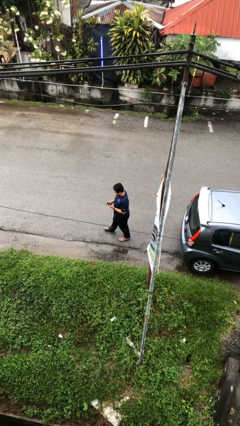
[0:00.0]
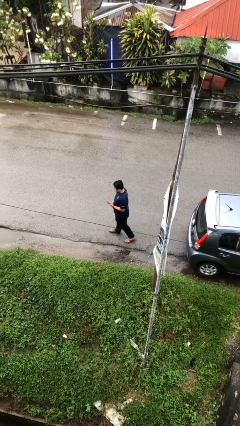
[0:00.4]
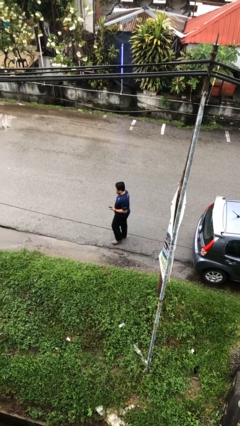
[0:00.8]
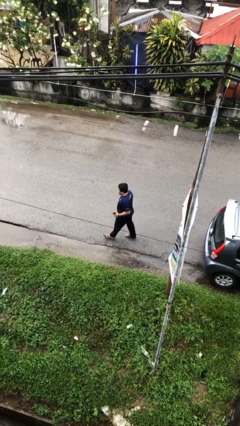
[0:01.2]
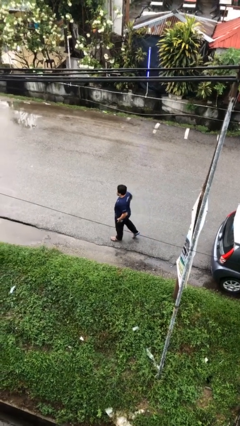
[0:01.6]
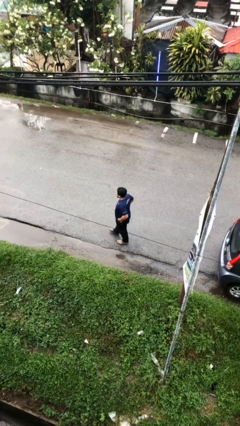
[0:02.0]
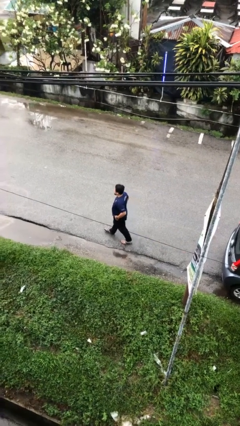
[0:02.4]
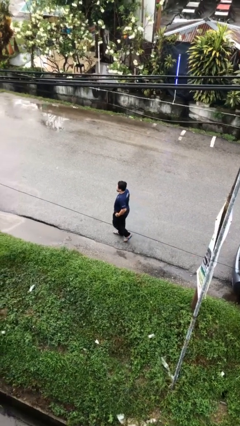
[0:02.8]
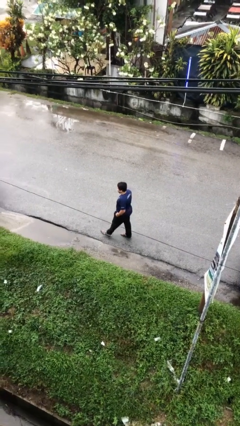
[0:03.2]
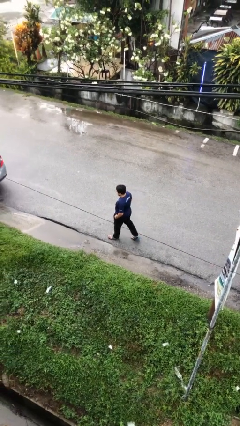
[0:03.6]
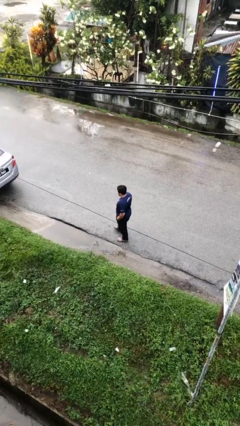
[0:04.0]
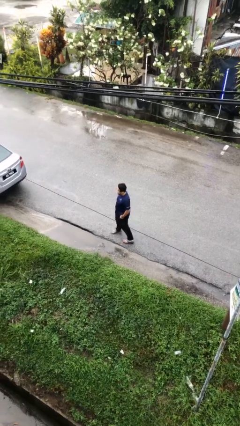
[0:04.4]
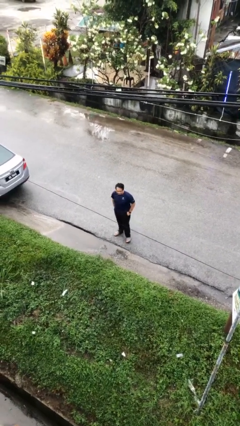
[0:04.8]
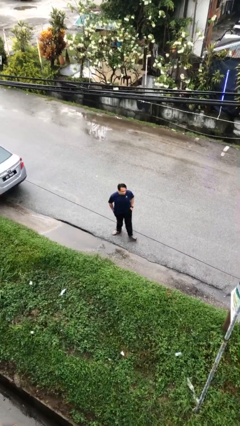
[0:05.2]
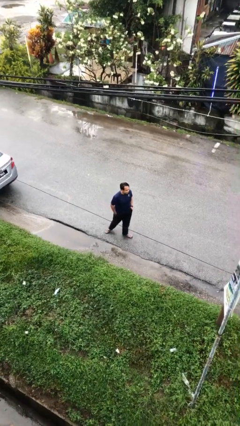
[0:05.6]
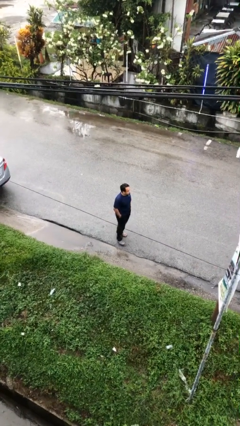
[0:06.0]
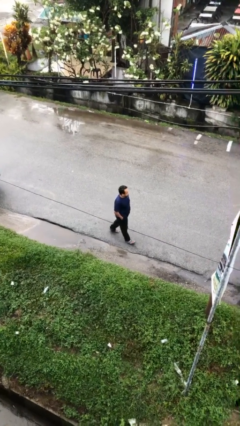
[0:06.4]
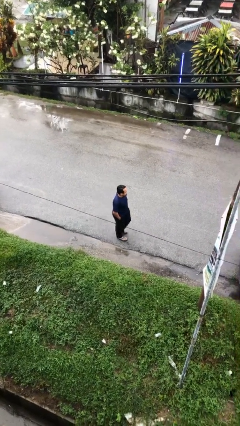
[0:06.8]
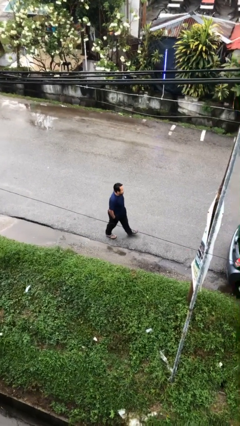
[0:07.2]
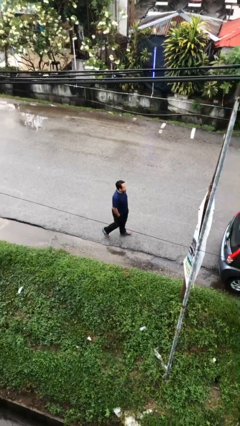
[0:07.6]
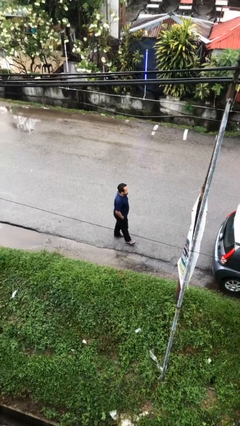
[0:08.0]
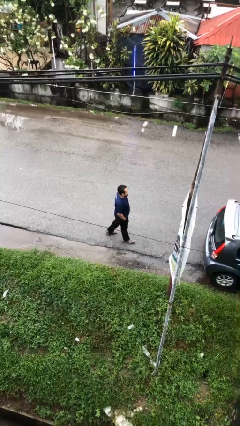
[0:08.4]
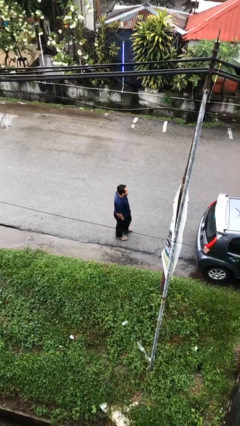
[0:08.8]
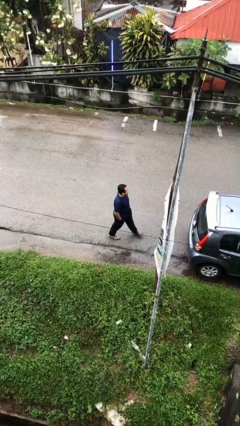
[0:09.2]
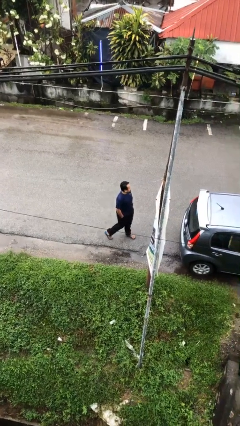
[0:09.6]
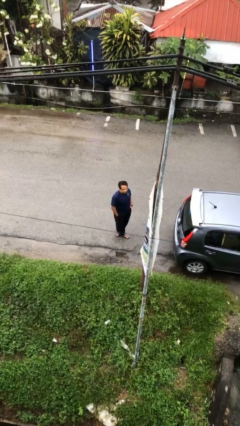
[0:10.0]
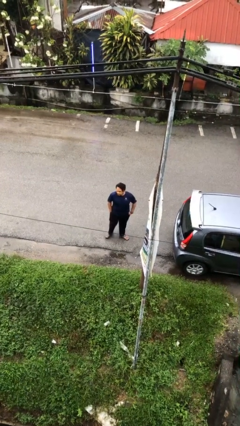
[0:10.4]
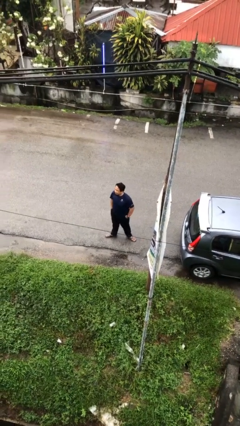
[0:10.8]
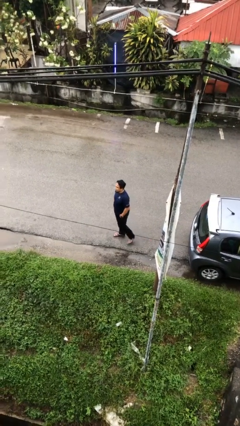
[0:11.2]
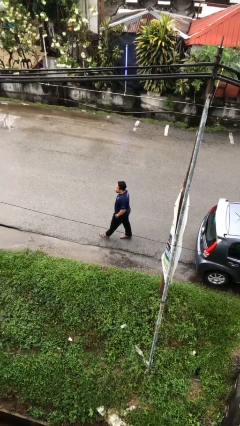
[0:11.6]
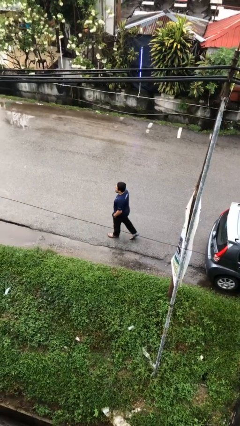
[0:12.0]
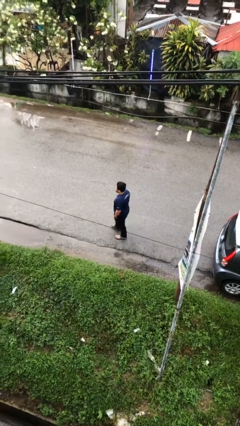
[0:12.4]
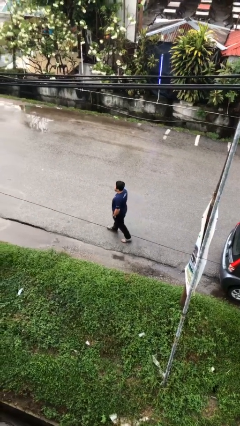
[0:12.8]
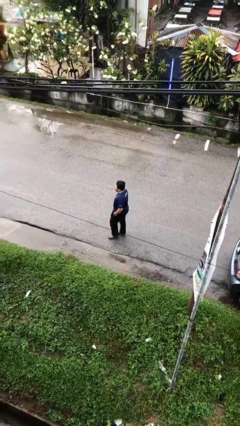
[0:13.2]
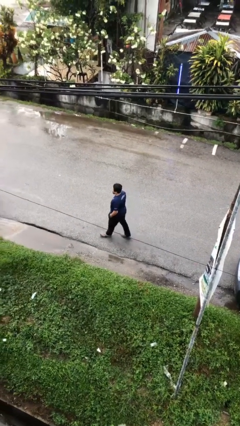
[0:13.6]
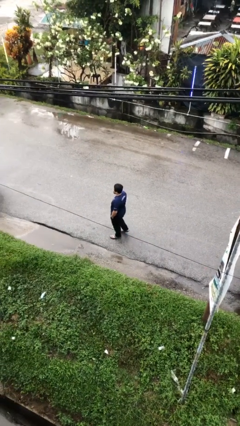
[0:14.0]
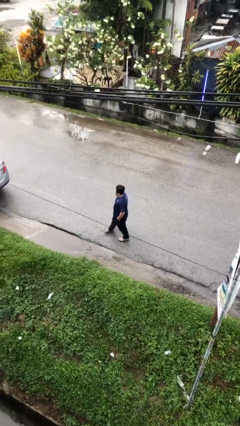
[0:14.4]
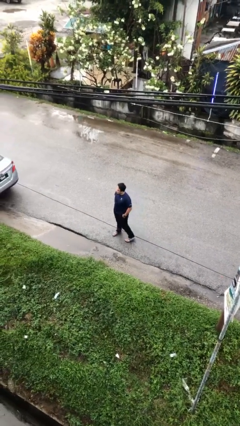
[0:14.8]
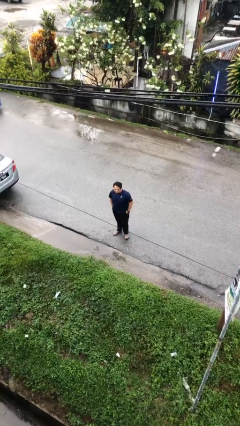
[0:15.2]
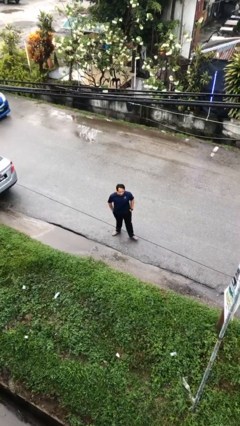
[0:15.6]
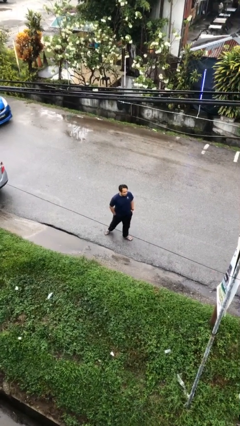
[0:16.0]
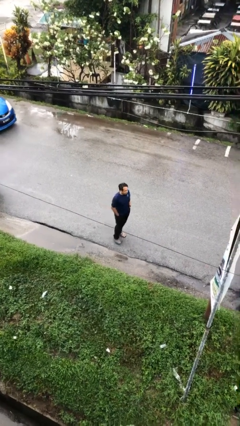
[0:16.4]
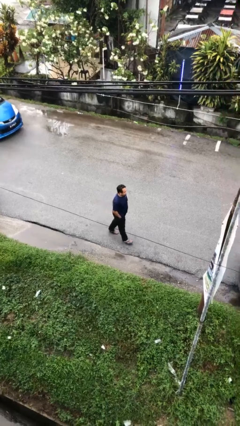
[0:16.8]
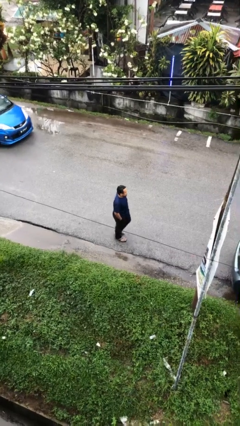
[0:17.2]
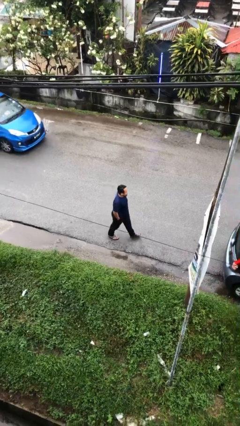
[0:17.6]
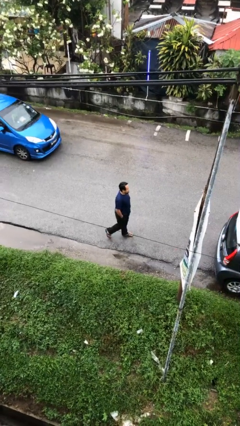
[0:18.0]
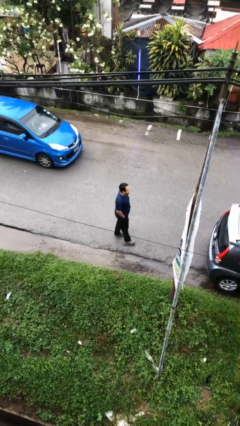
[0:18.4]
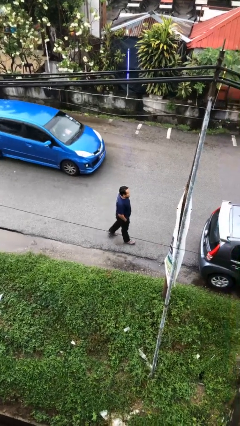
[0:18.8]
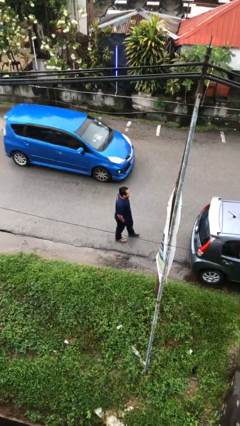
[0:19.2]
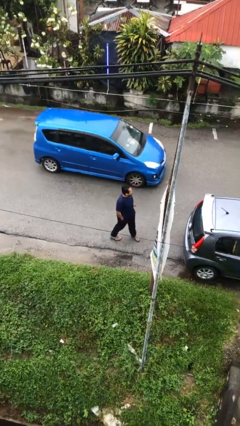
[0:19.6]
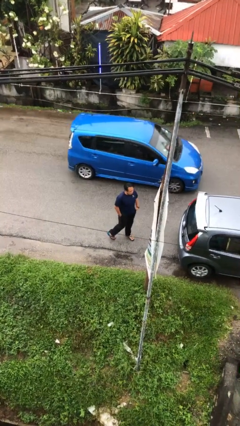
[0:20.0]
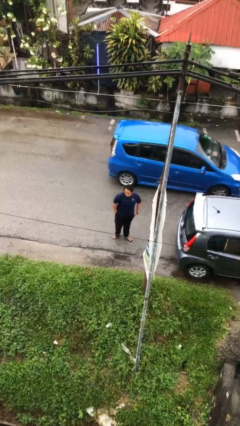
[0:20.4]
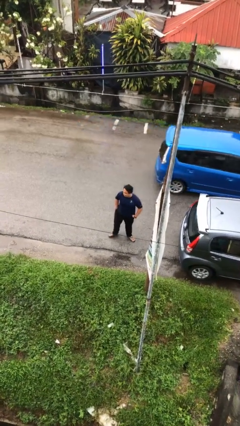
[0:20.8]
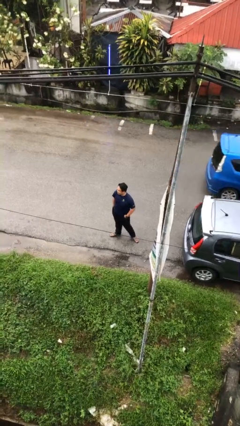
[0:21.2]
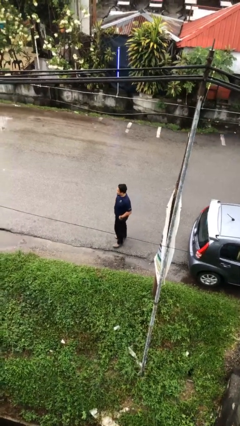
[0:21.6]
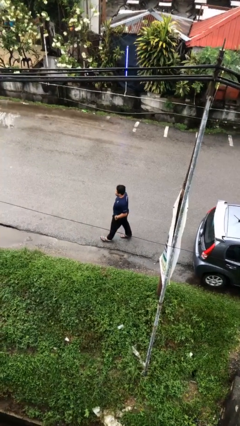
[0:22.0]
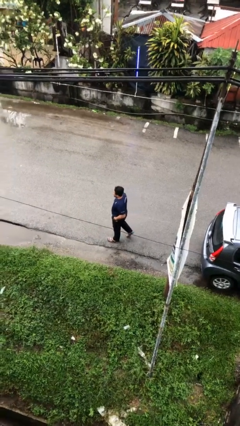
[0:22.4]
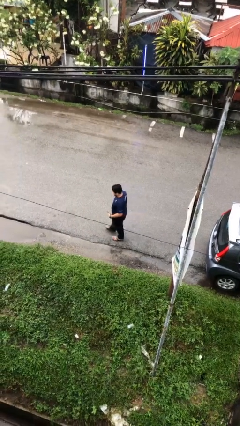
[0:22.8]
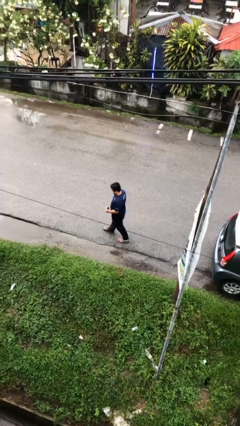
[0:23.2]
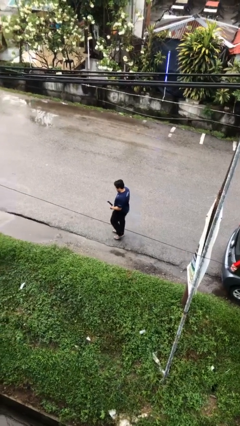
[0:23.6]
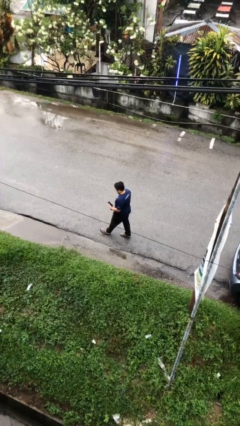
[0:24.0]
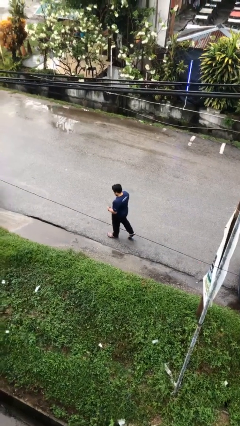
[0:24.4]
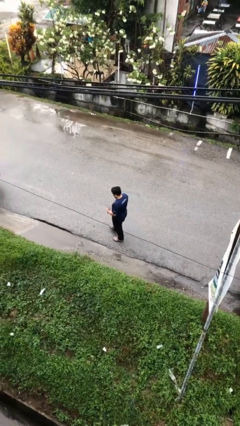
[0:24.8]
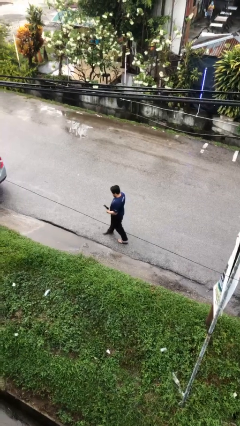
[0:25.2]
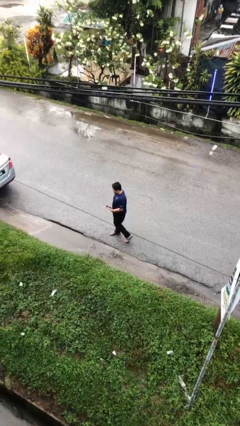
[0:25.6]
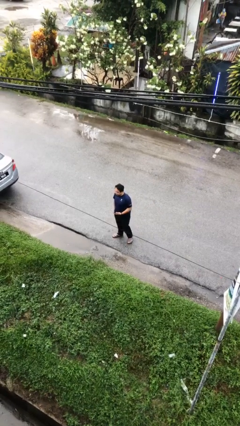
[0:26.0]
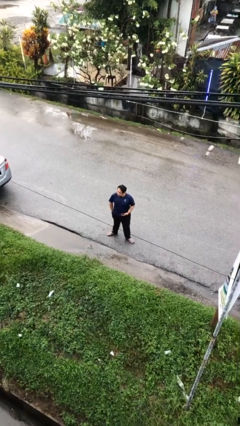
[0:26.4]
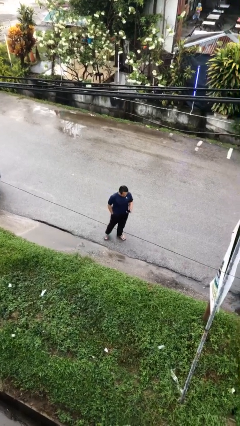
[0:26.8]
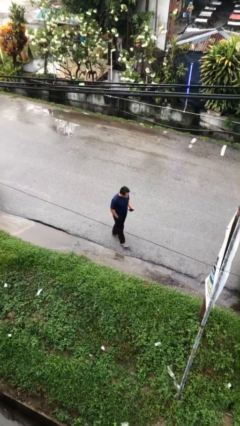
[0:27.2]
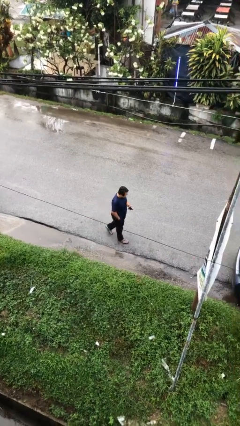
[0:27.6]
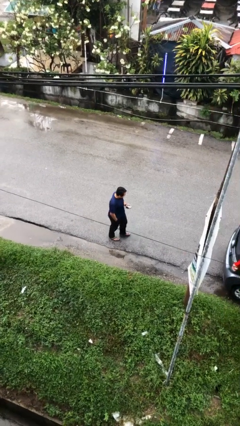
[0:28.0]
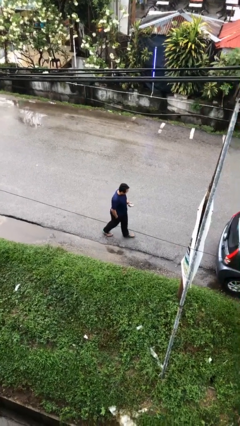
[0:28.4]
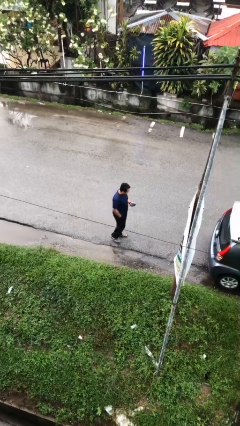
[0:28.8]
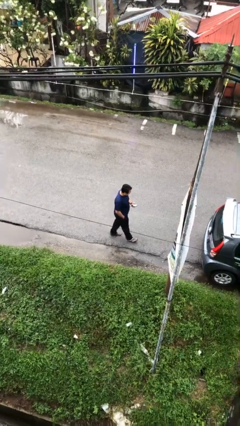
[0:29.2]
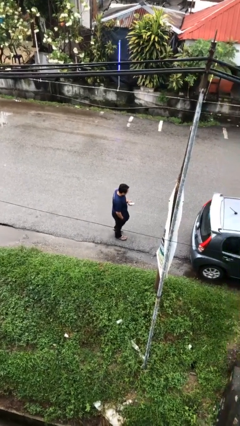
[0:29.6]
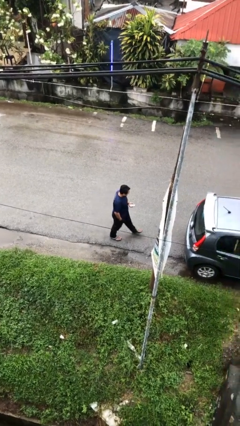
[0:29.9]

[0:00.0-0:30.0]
person walks

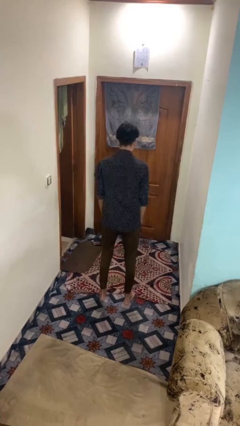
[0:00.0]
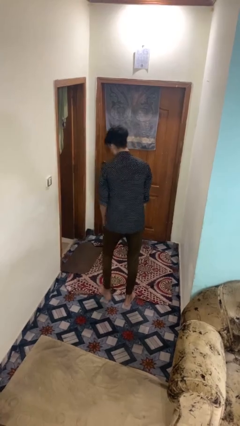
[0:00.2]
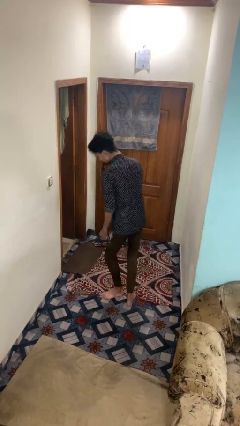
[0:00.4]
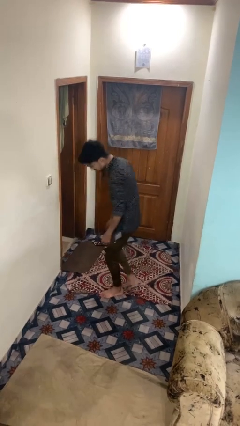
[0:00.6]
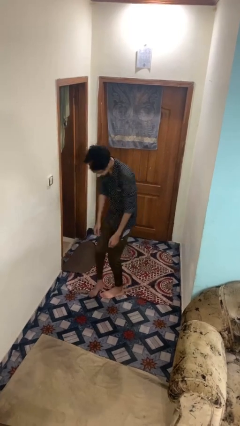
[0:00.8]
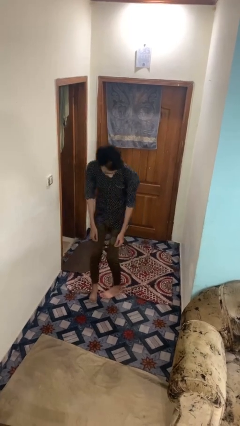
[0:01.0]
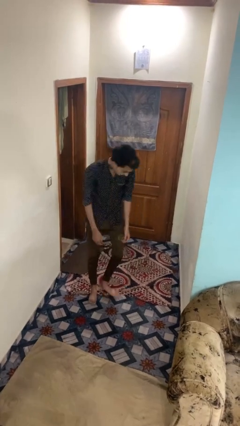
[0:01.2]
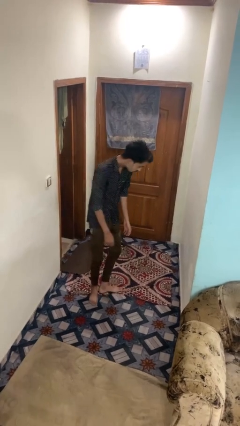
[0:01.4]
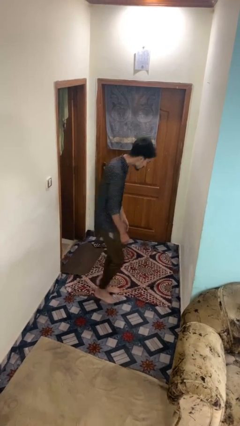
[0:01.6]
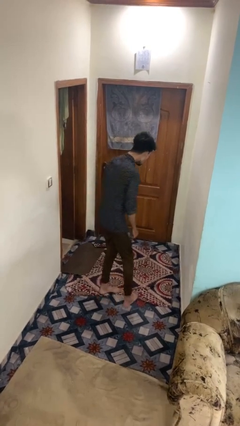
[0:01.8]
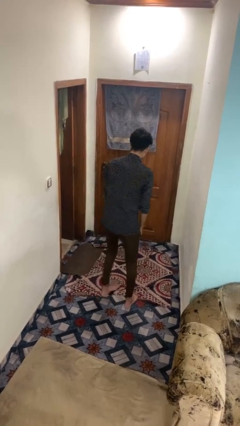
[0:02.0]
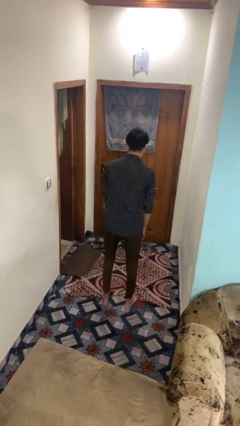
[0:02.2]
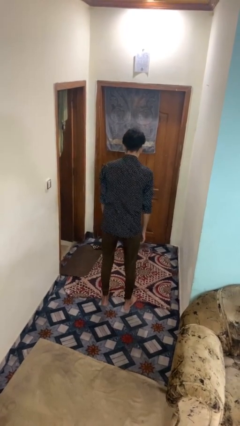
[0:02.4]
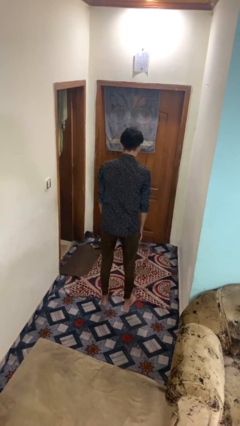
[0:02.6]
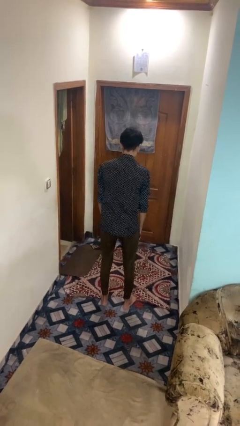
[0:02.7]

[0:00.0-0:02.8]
person twirls

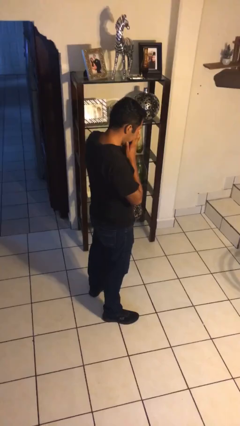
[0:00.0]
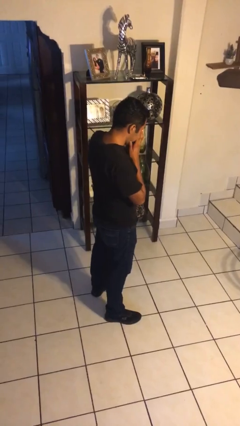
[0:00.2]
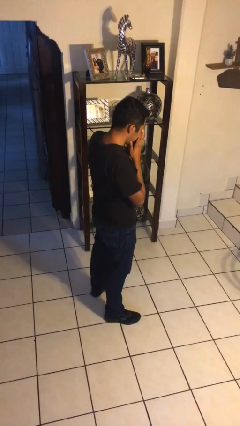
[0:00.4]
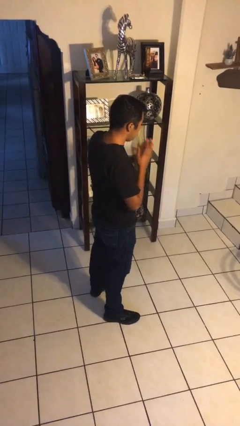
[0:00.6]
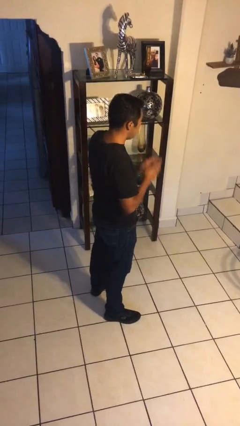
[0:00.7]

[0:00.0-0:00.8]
person sneezes into hand
